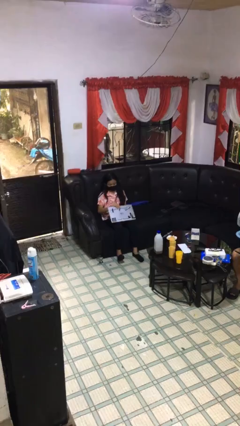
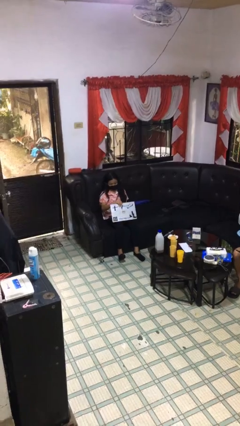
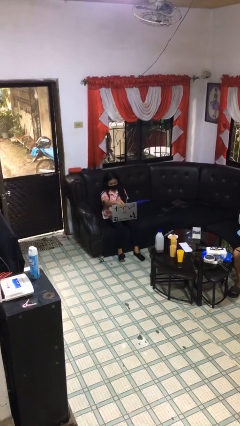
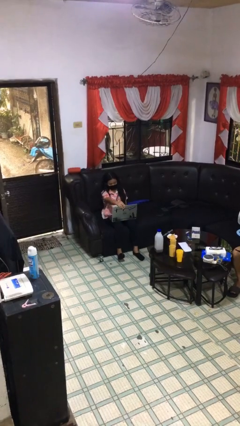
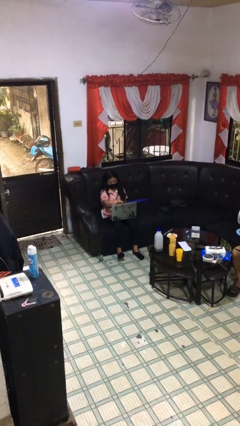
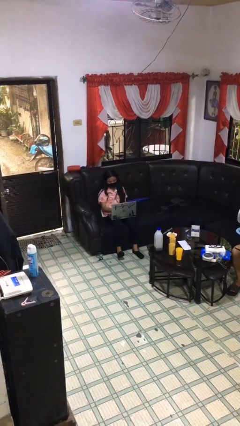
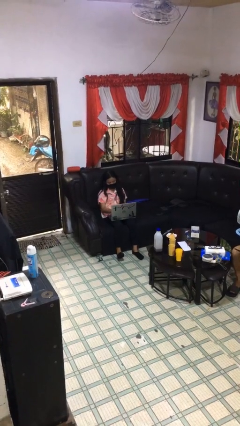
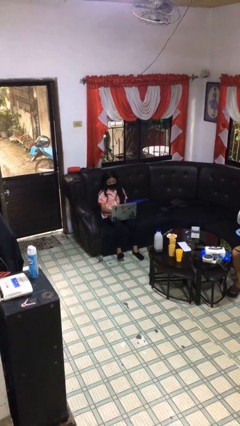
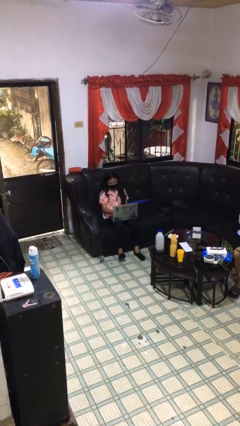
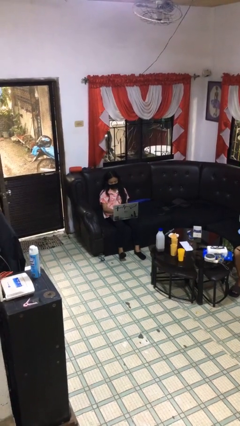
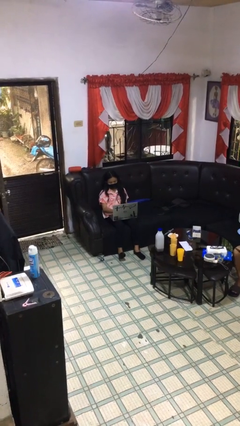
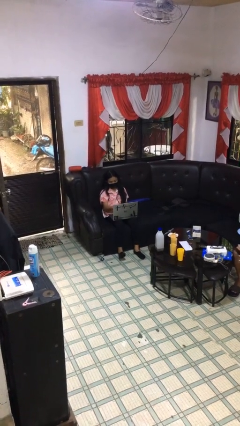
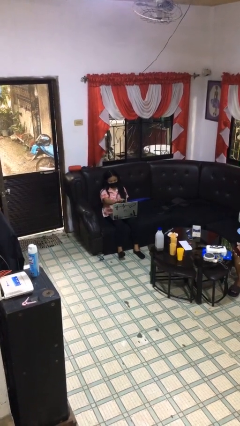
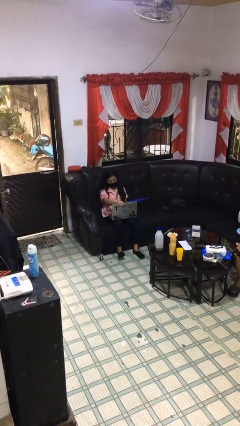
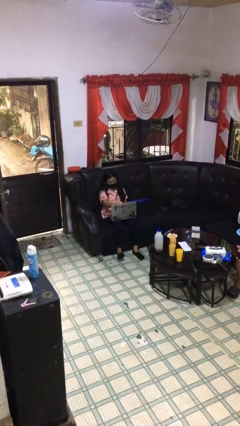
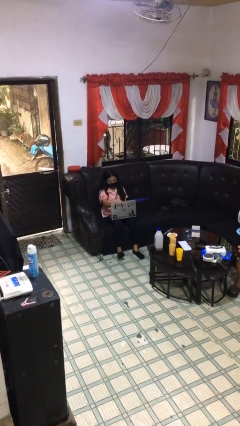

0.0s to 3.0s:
person interacts with laptop

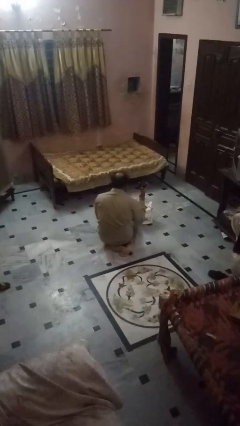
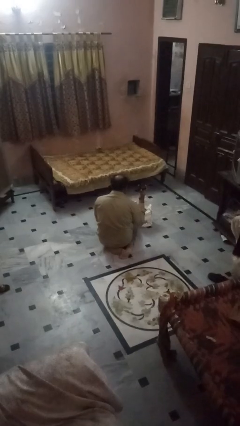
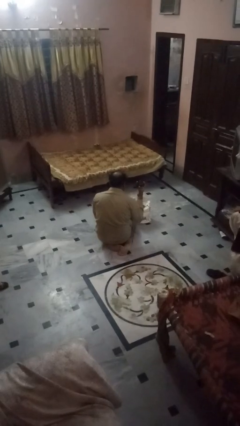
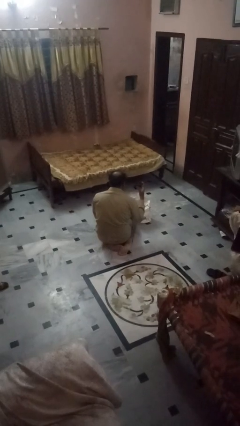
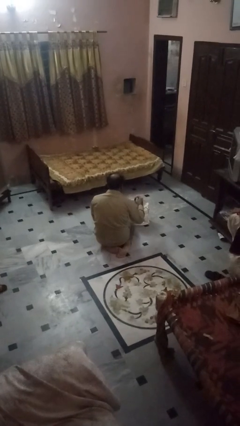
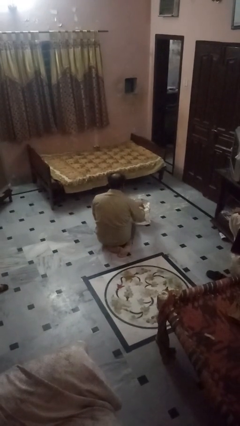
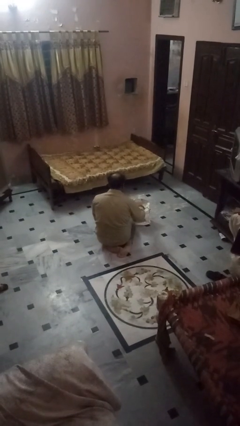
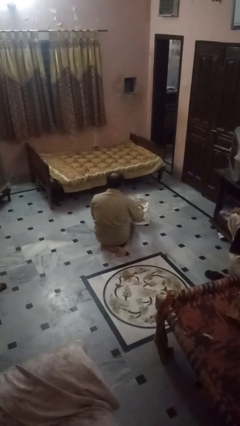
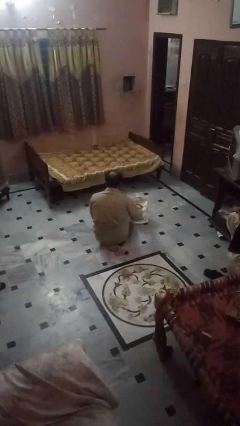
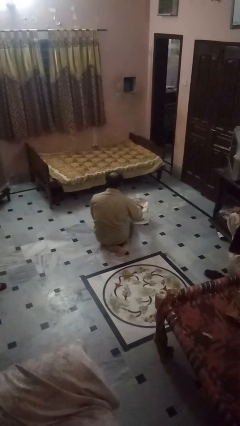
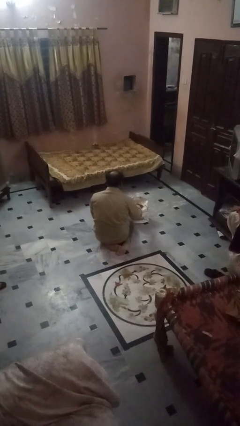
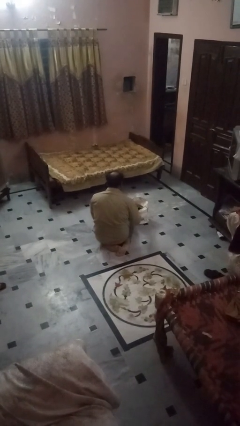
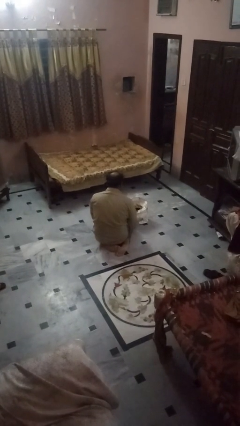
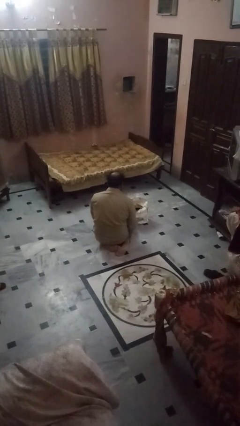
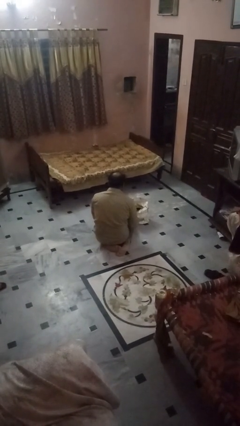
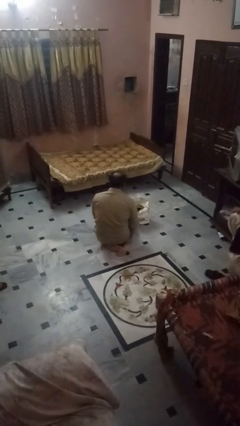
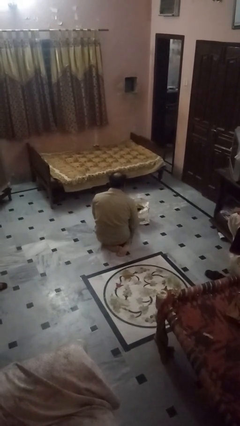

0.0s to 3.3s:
person puts object into bag

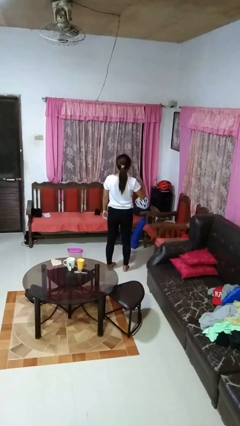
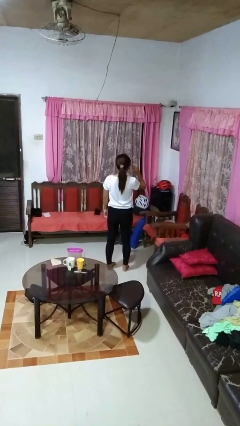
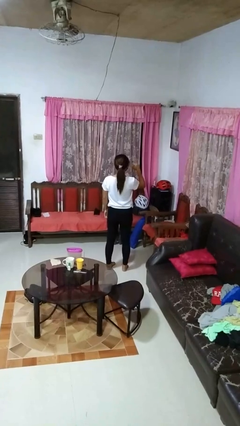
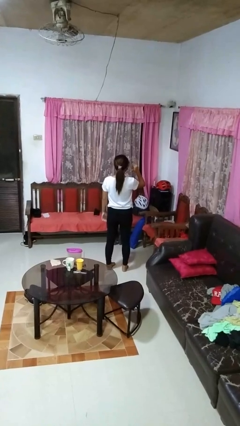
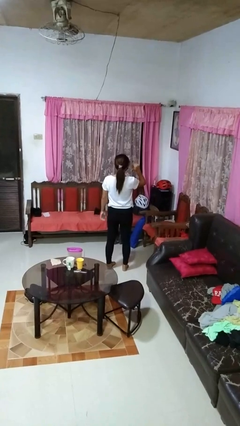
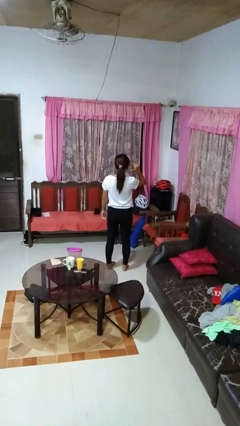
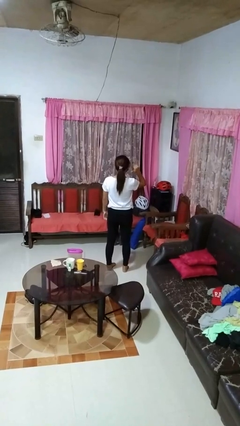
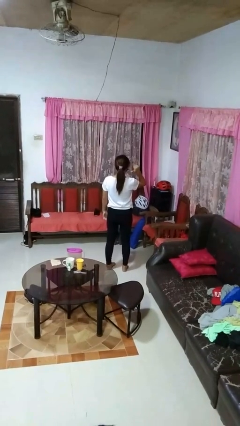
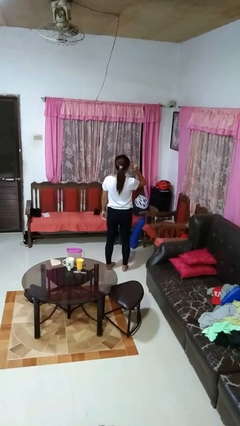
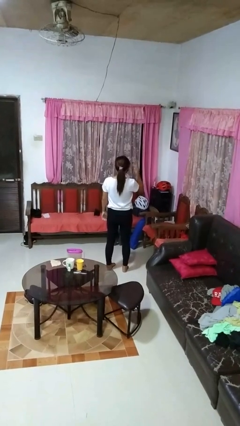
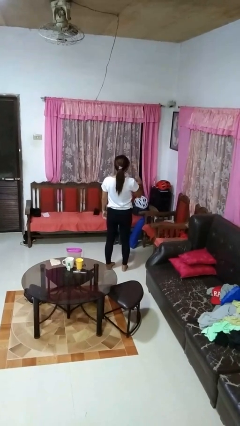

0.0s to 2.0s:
person gestures behind me

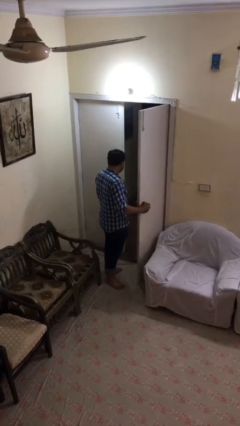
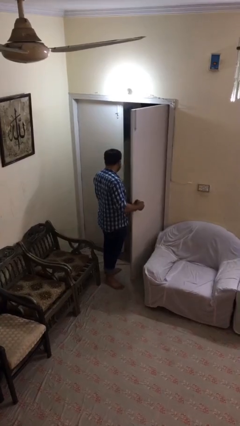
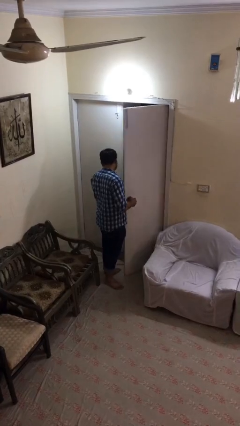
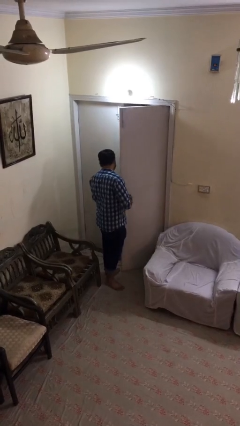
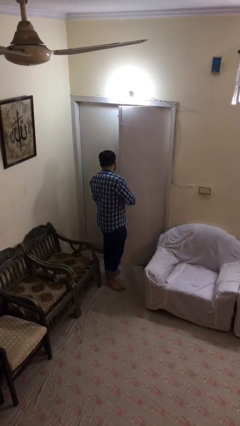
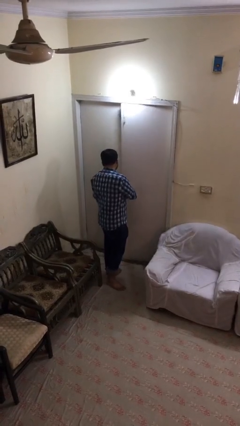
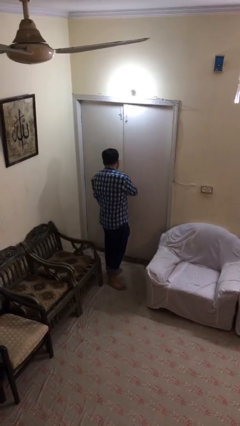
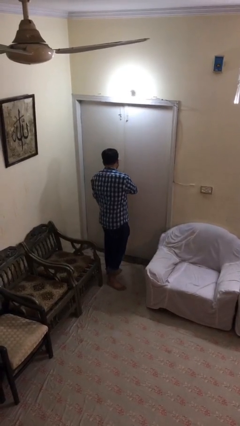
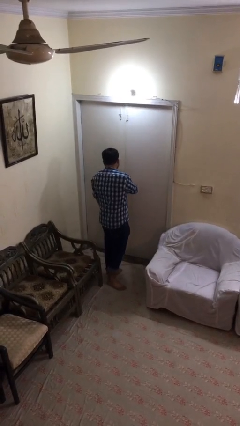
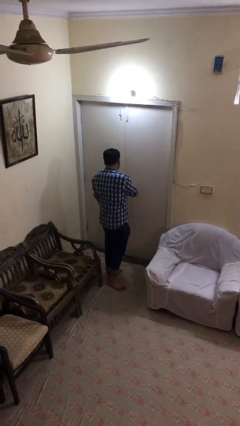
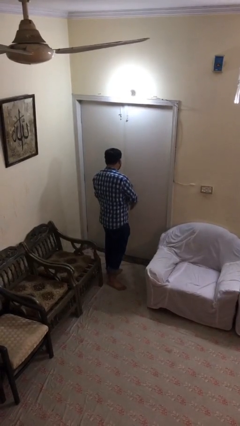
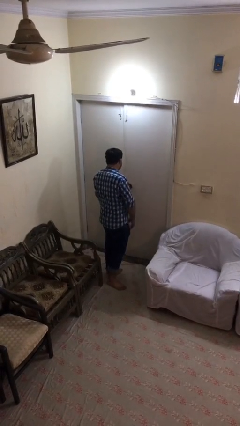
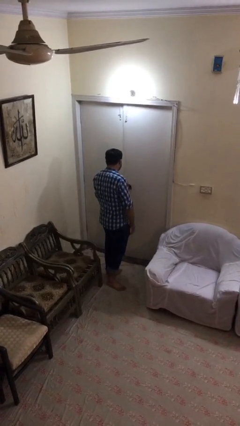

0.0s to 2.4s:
person closes facility door

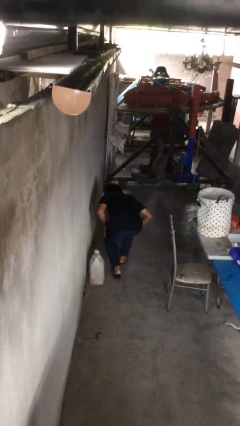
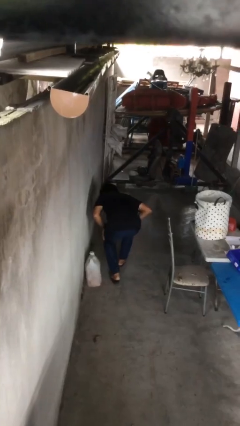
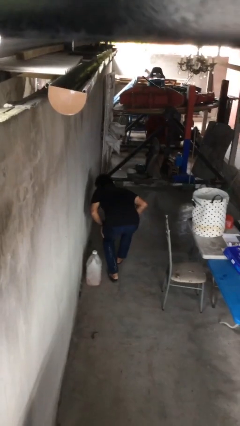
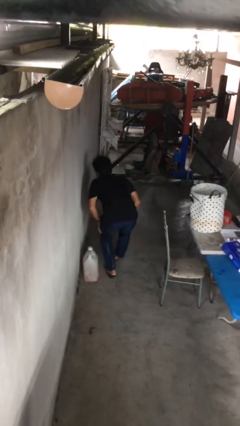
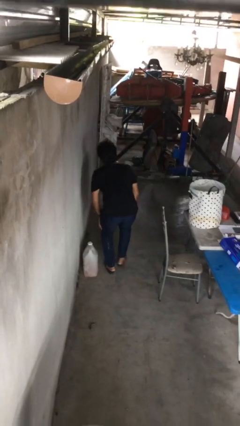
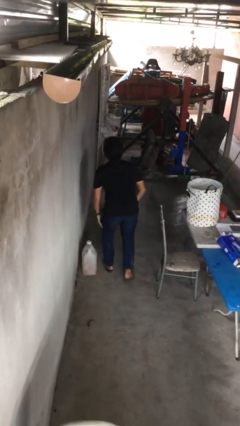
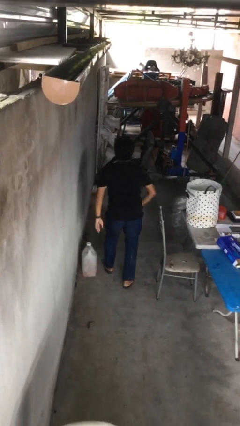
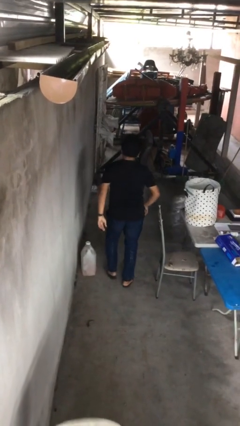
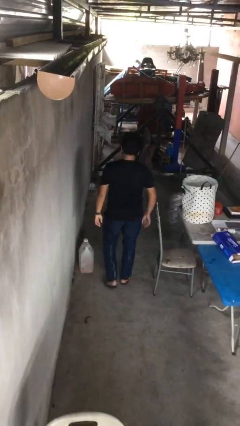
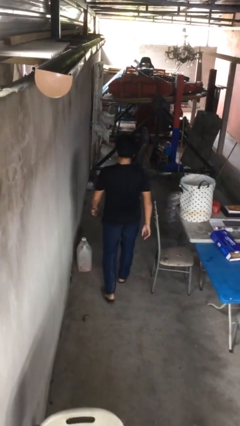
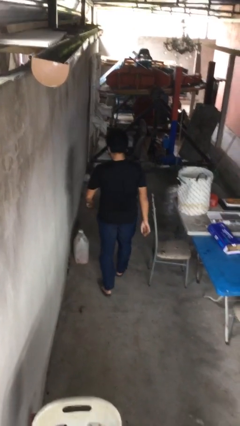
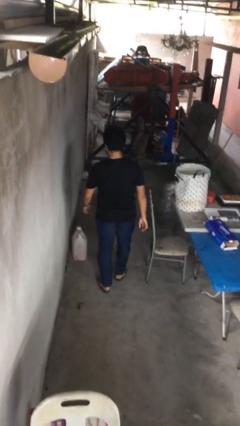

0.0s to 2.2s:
person stands up from floor

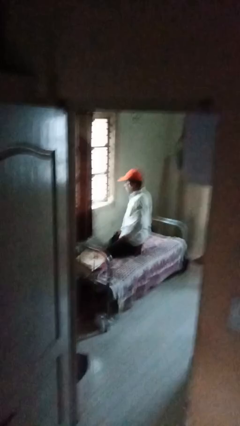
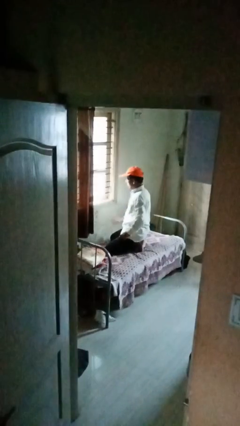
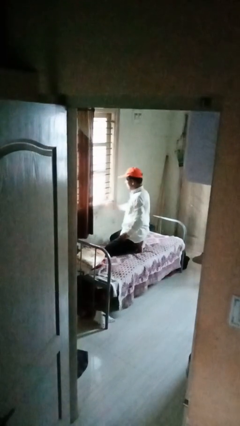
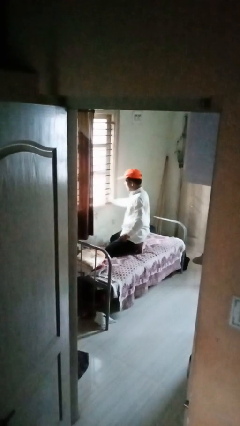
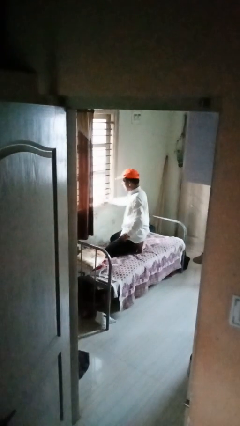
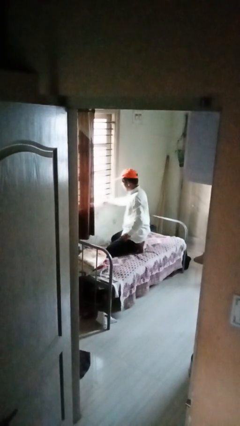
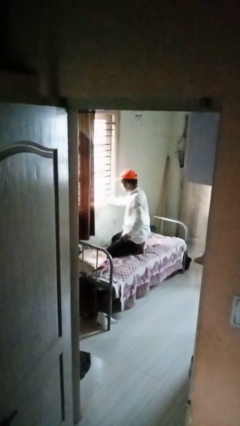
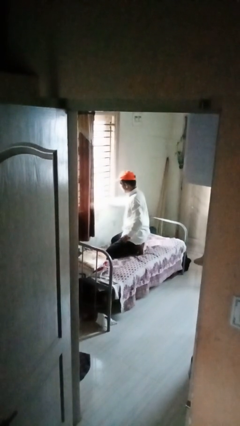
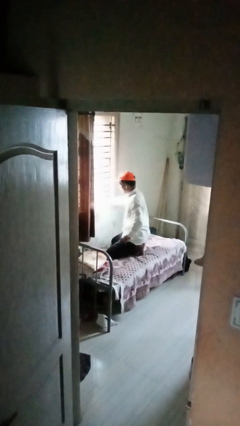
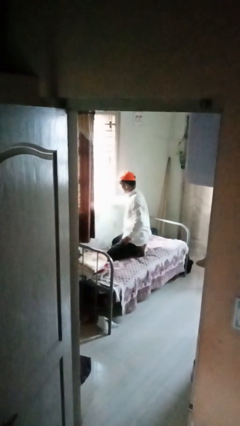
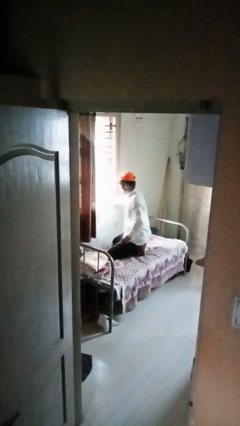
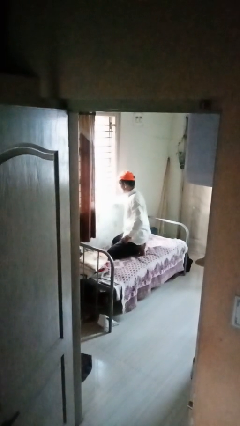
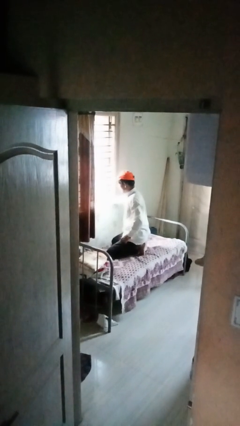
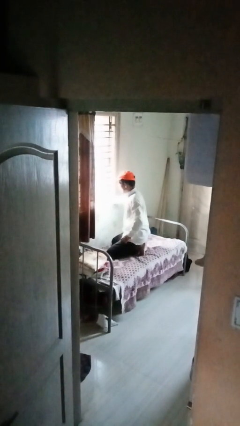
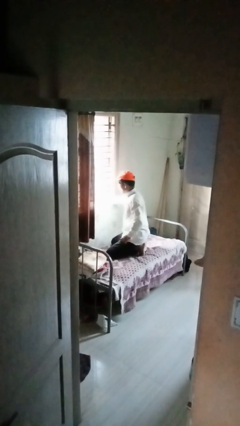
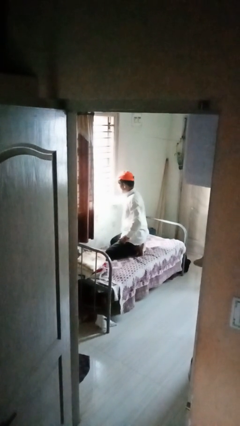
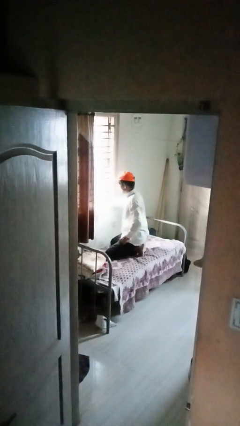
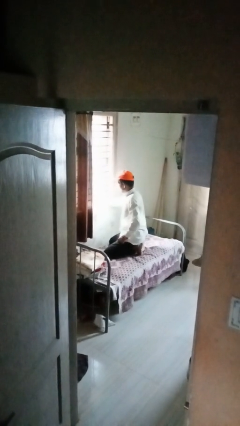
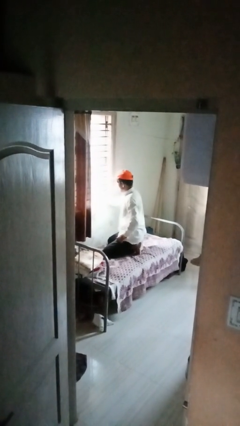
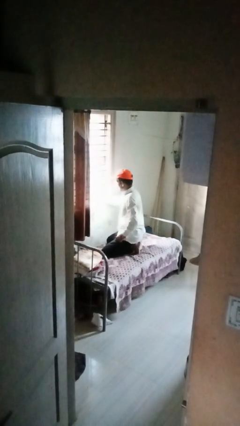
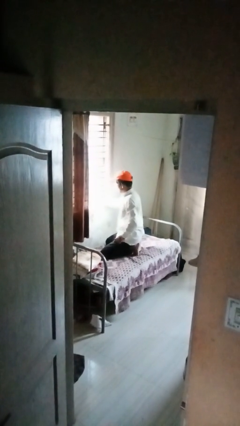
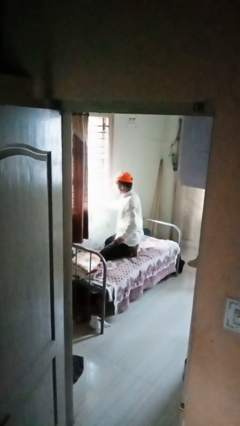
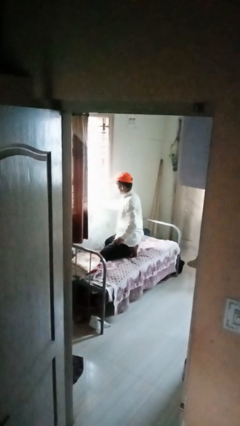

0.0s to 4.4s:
person opens home window
